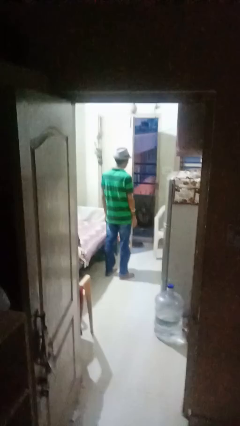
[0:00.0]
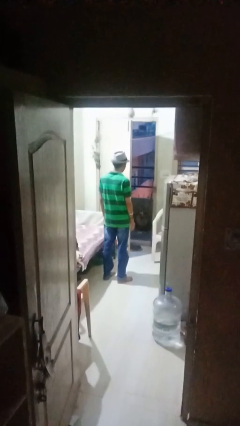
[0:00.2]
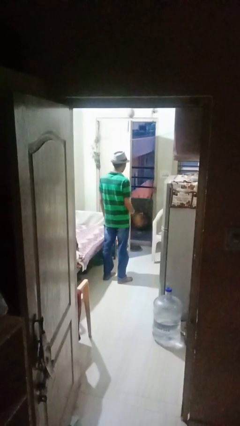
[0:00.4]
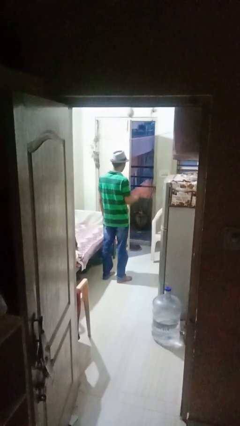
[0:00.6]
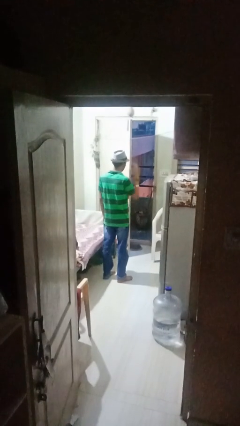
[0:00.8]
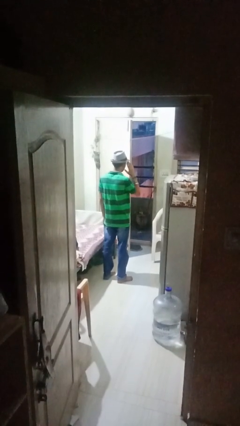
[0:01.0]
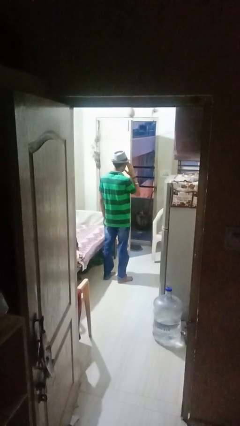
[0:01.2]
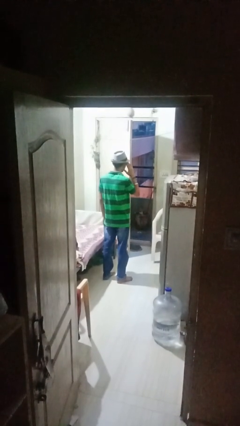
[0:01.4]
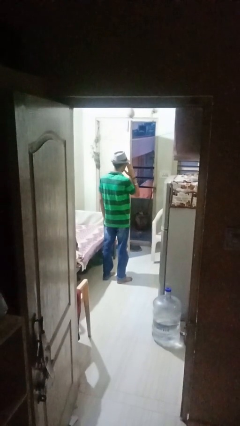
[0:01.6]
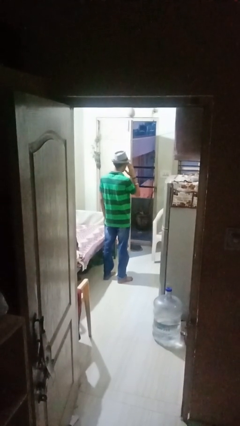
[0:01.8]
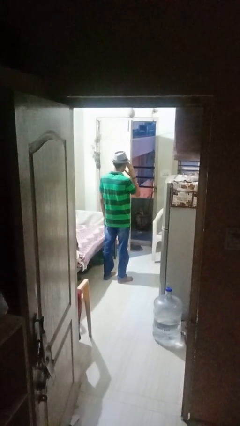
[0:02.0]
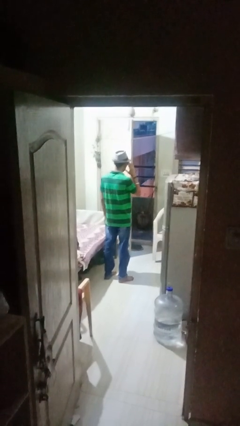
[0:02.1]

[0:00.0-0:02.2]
person salutes

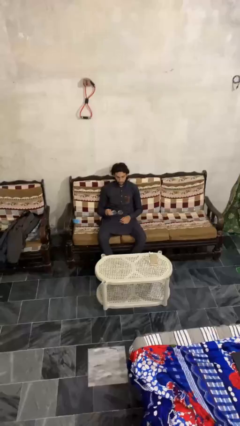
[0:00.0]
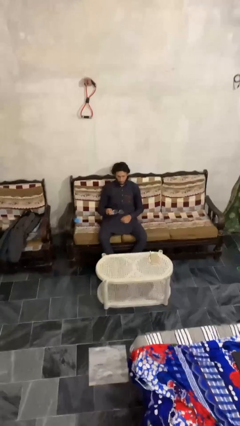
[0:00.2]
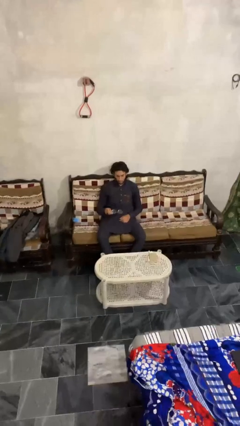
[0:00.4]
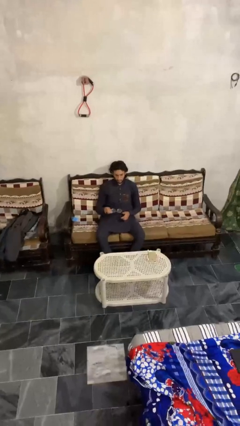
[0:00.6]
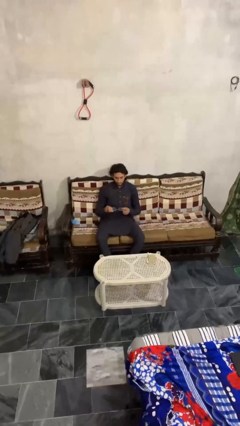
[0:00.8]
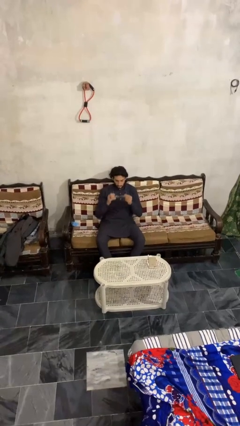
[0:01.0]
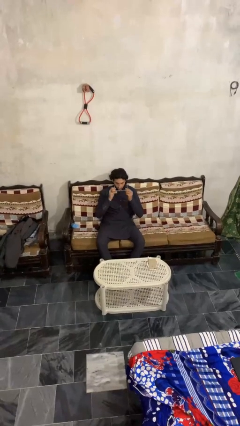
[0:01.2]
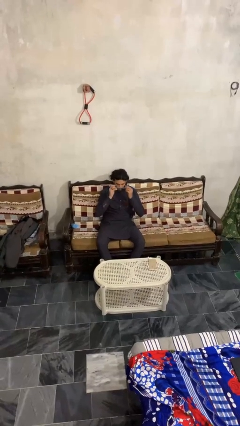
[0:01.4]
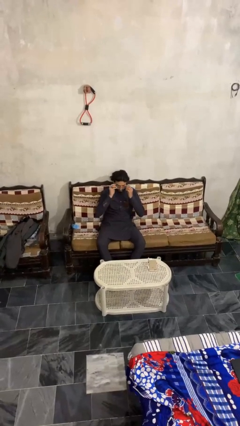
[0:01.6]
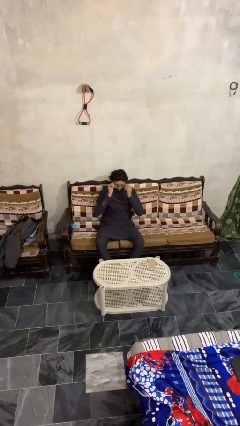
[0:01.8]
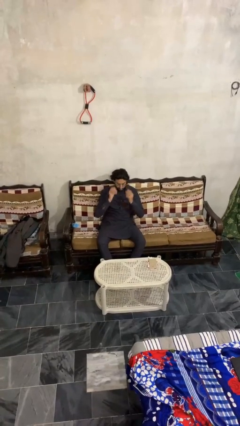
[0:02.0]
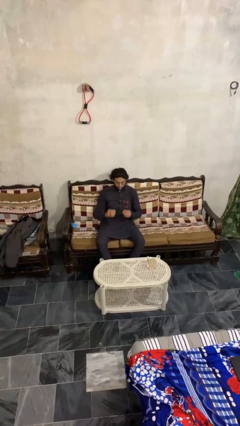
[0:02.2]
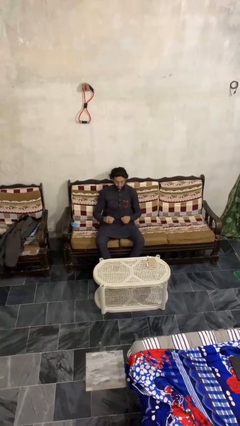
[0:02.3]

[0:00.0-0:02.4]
person puts on glasses

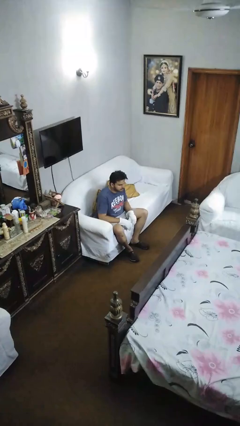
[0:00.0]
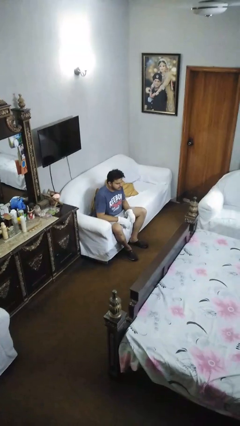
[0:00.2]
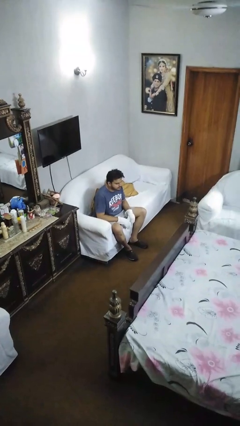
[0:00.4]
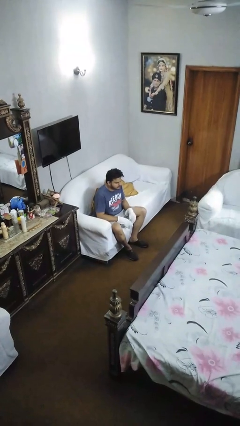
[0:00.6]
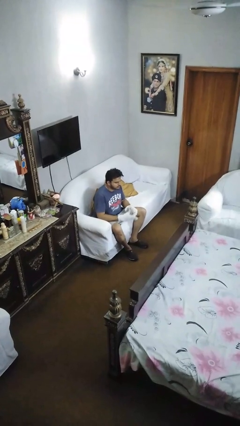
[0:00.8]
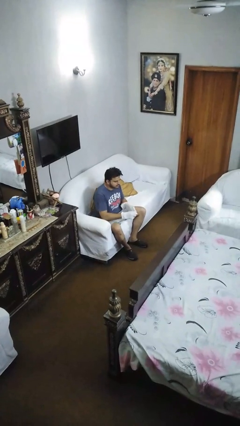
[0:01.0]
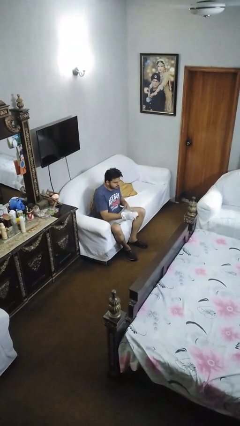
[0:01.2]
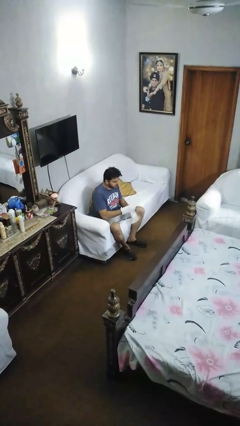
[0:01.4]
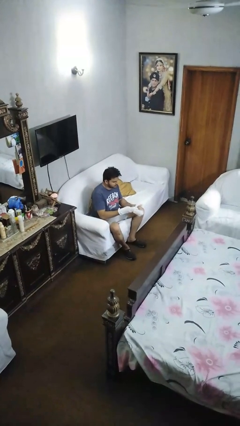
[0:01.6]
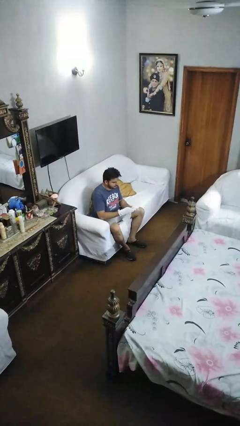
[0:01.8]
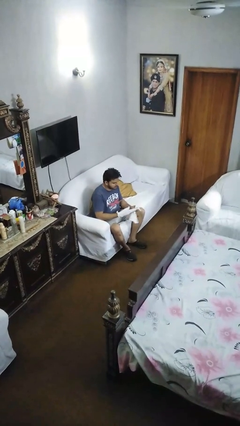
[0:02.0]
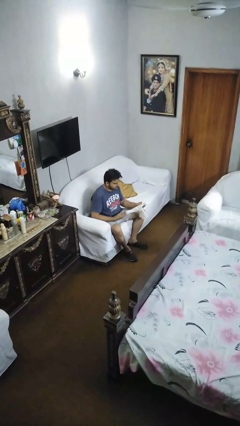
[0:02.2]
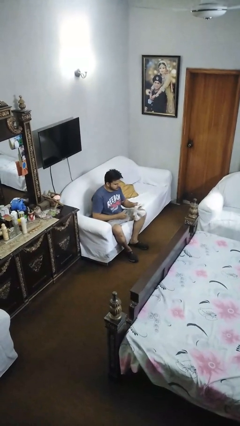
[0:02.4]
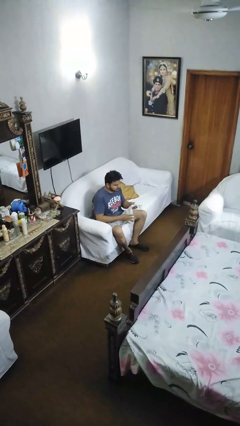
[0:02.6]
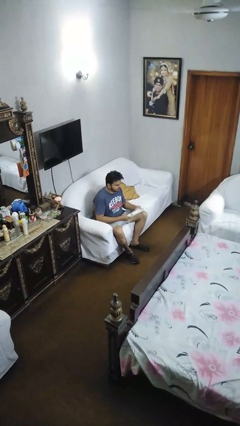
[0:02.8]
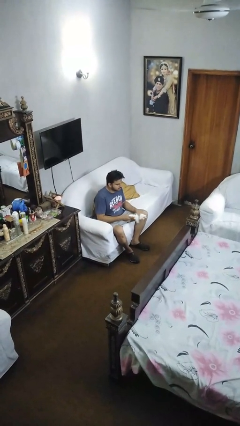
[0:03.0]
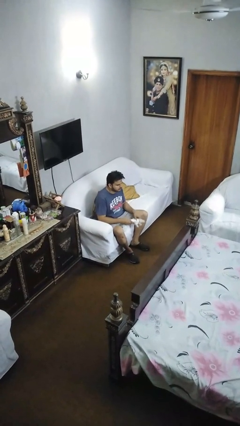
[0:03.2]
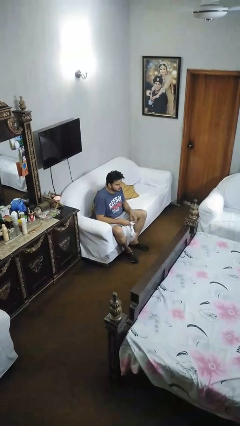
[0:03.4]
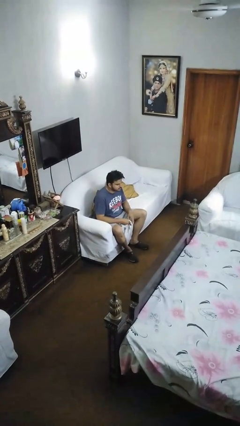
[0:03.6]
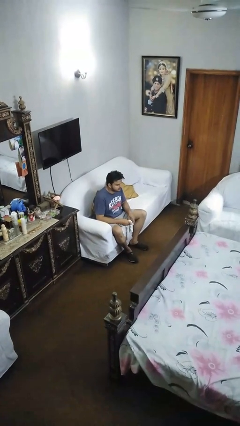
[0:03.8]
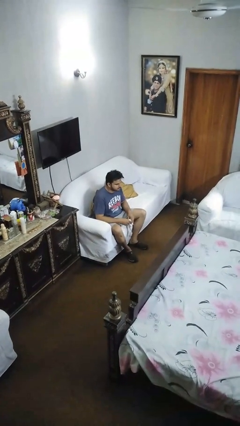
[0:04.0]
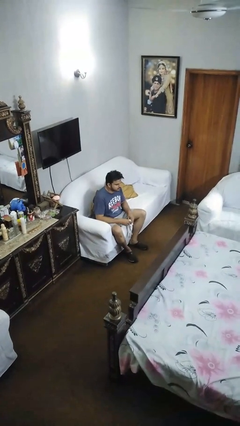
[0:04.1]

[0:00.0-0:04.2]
person takes off gloves

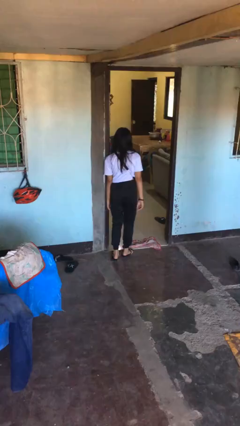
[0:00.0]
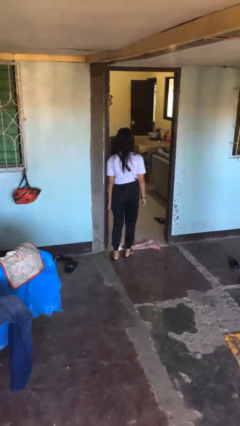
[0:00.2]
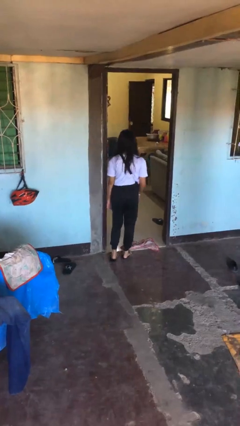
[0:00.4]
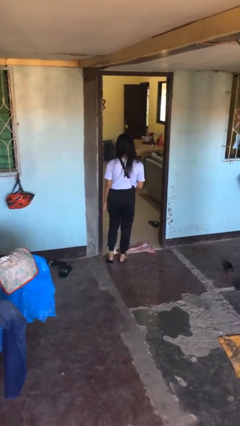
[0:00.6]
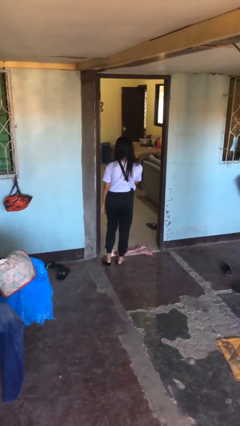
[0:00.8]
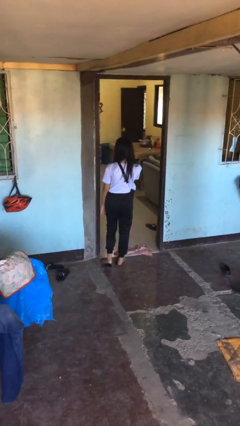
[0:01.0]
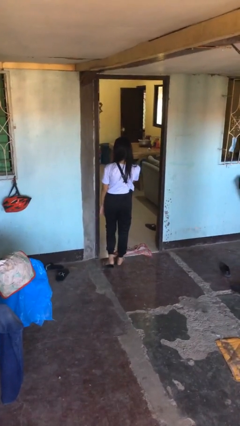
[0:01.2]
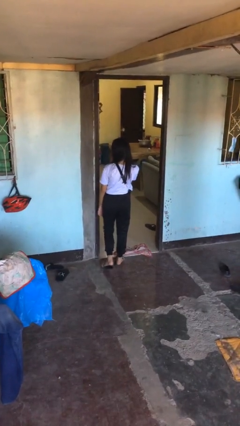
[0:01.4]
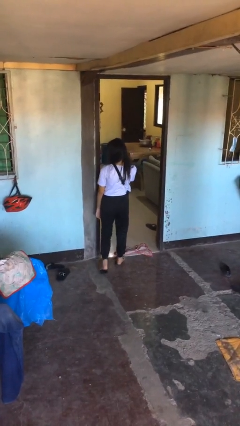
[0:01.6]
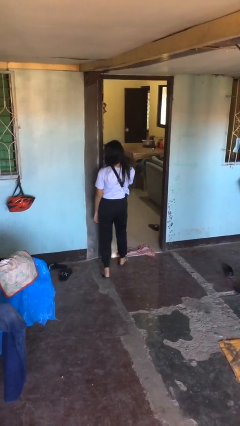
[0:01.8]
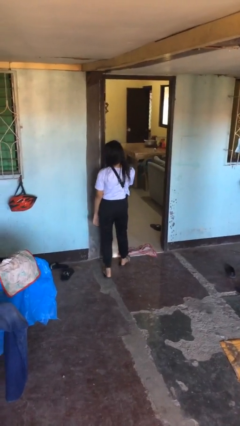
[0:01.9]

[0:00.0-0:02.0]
person bumps into wall

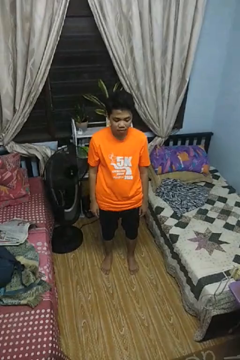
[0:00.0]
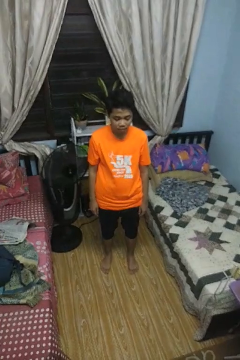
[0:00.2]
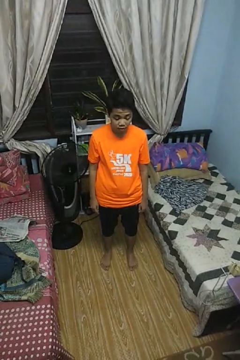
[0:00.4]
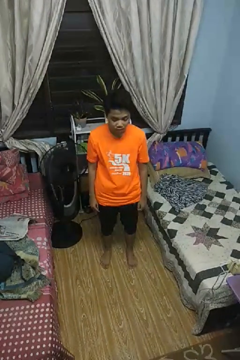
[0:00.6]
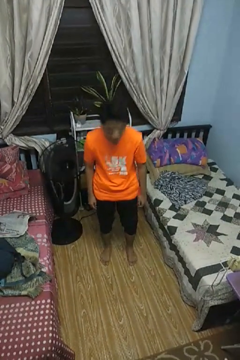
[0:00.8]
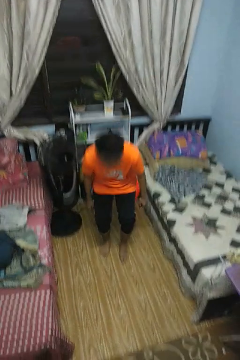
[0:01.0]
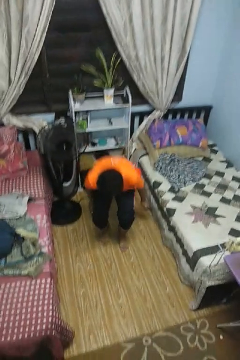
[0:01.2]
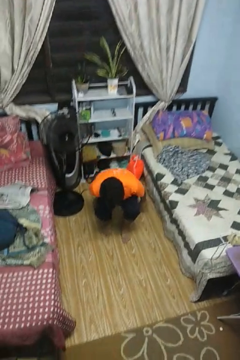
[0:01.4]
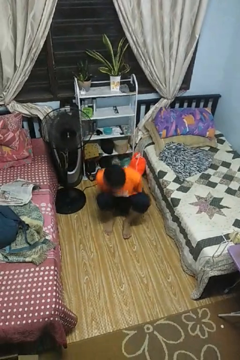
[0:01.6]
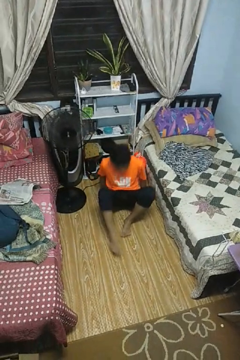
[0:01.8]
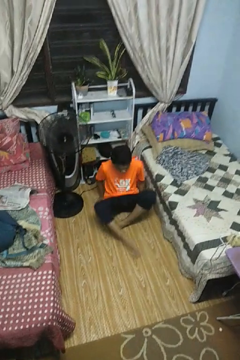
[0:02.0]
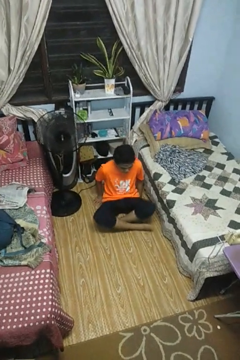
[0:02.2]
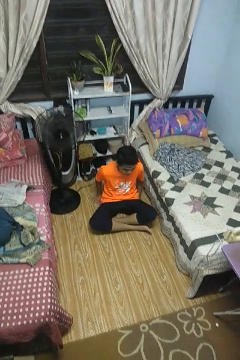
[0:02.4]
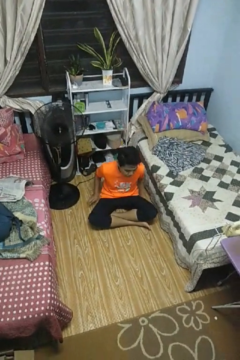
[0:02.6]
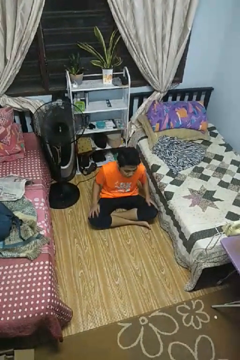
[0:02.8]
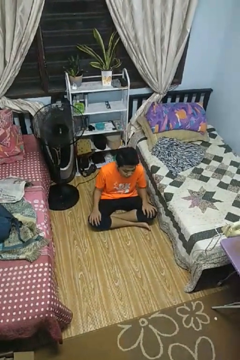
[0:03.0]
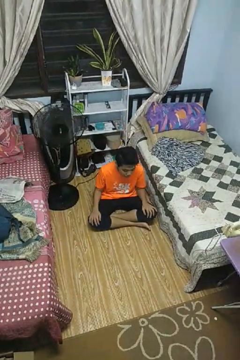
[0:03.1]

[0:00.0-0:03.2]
person sits crisscross

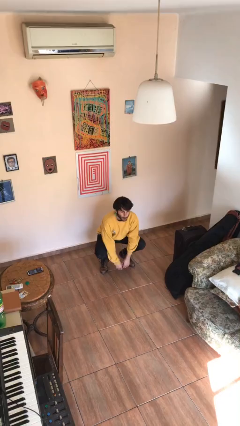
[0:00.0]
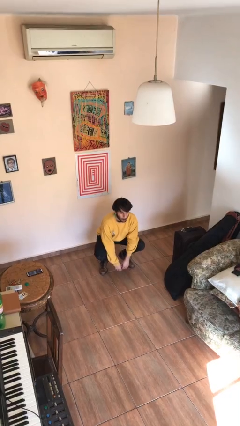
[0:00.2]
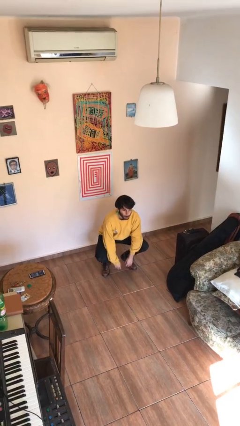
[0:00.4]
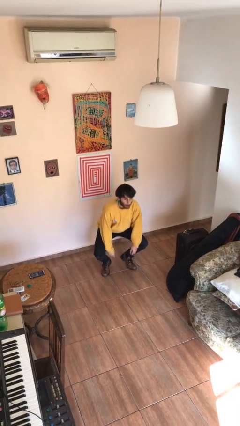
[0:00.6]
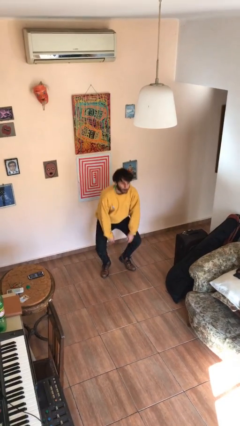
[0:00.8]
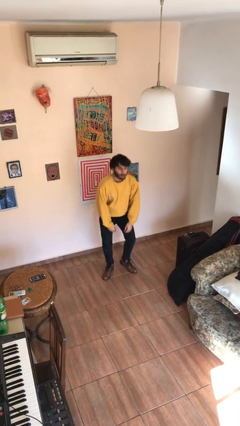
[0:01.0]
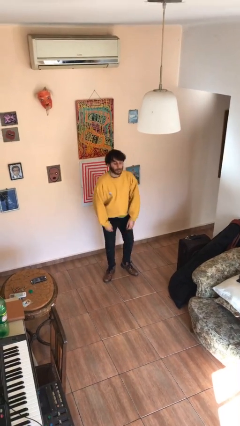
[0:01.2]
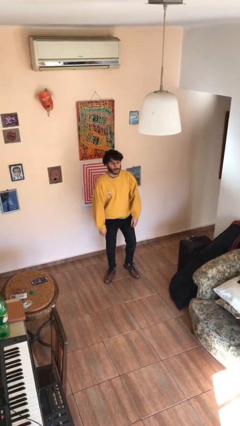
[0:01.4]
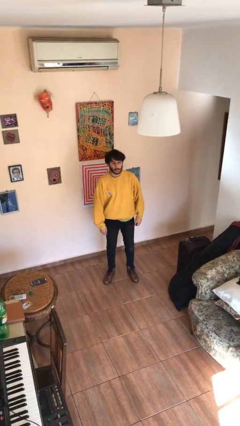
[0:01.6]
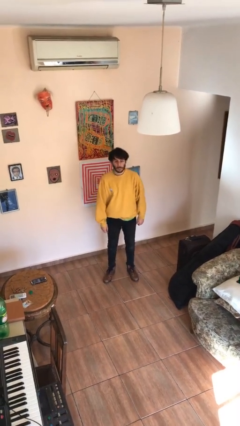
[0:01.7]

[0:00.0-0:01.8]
person stands up

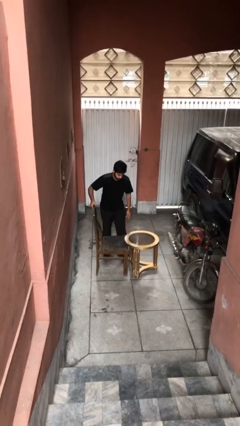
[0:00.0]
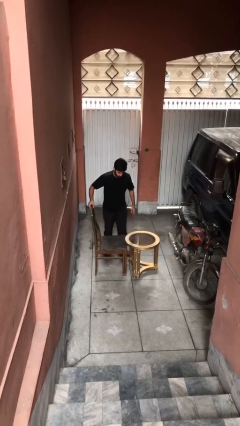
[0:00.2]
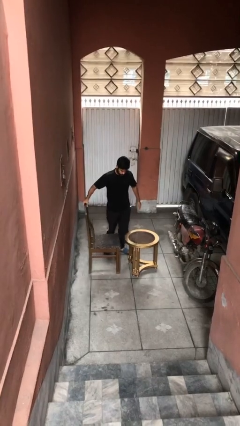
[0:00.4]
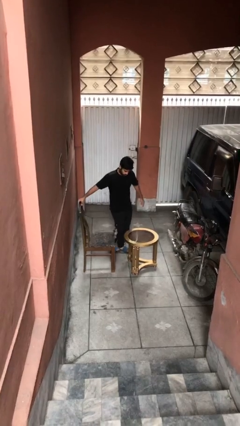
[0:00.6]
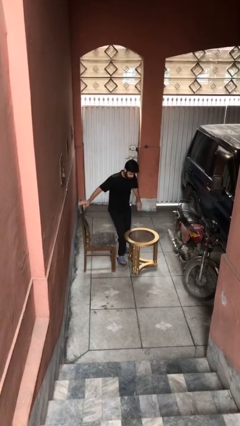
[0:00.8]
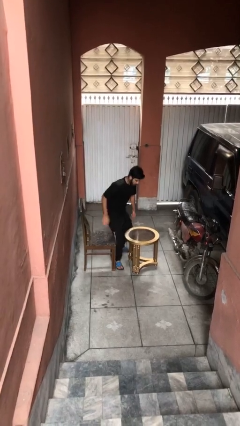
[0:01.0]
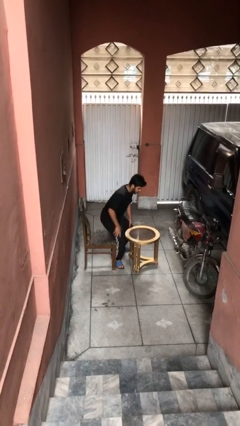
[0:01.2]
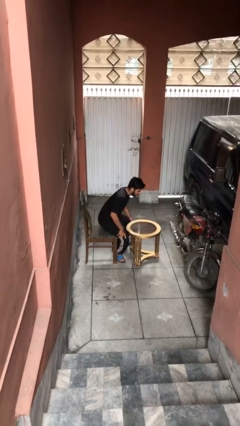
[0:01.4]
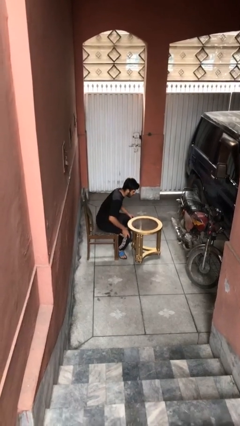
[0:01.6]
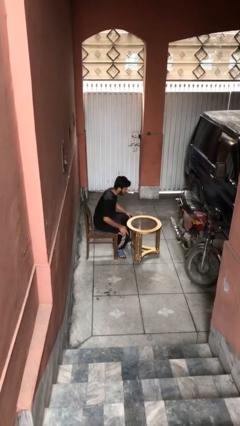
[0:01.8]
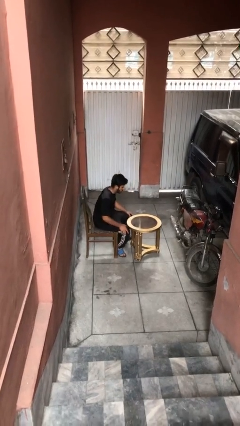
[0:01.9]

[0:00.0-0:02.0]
person sits down
